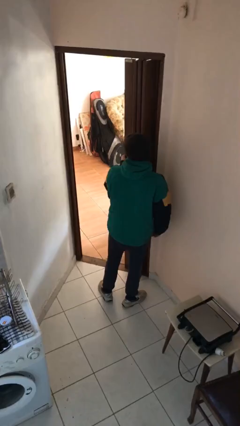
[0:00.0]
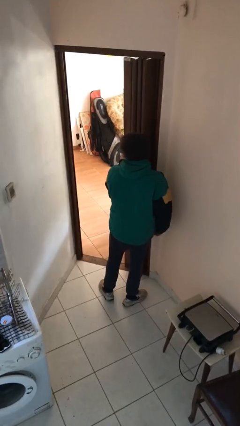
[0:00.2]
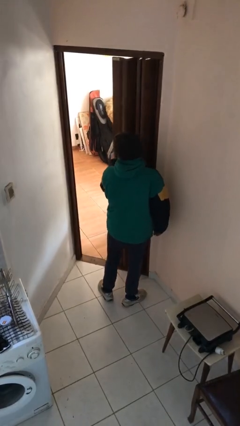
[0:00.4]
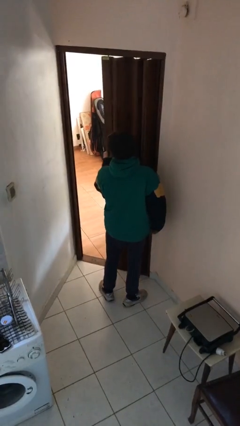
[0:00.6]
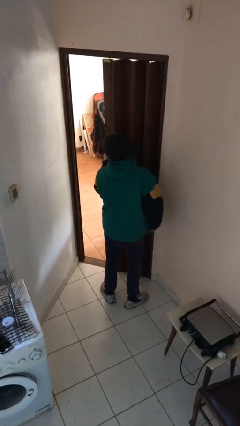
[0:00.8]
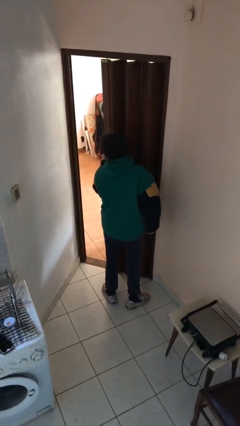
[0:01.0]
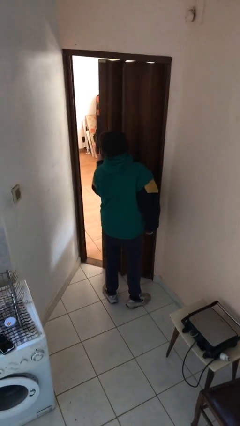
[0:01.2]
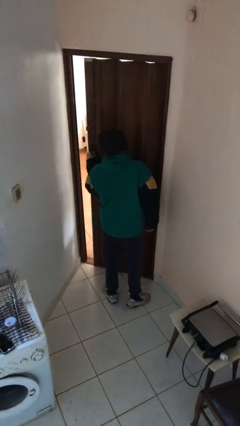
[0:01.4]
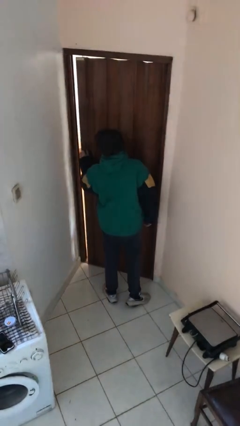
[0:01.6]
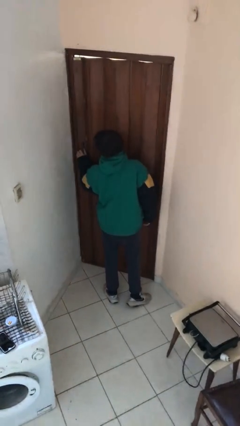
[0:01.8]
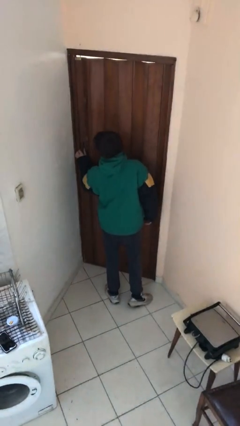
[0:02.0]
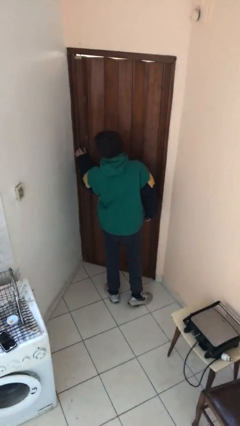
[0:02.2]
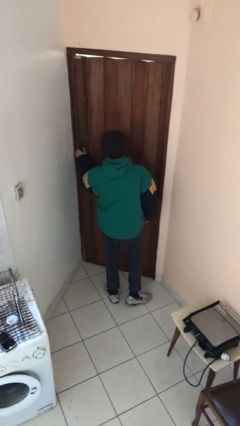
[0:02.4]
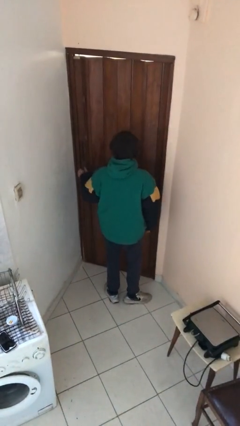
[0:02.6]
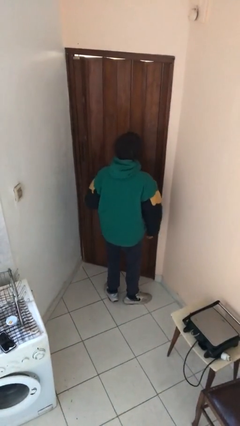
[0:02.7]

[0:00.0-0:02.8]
person closes sliding door

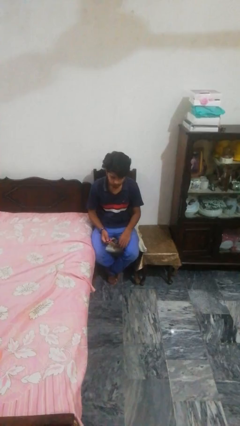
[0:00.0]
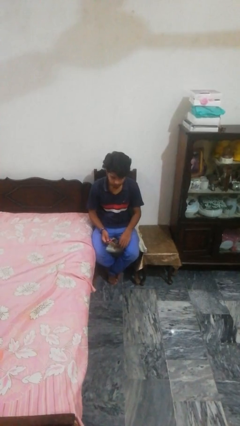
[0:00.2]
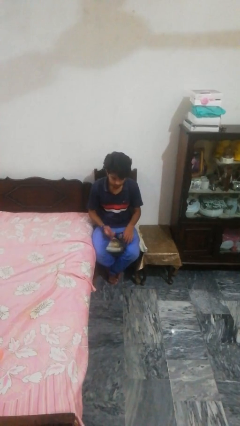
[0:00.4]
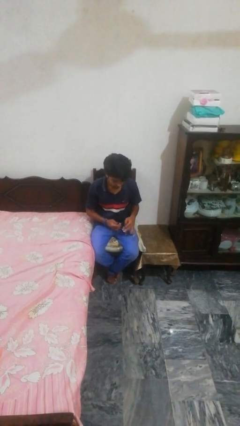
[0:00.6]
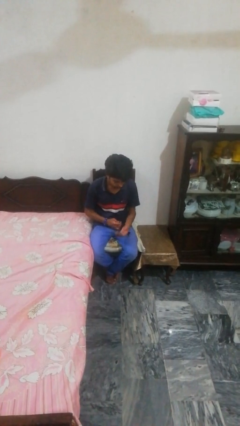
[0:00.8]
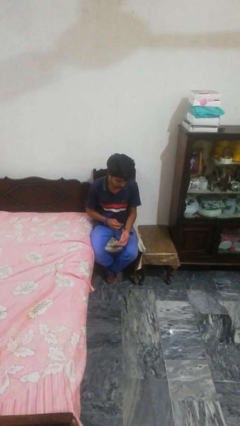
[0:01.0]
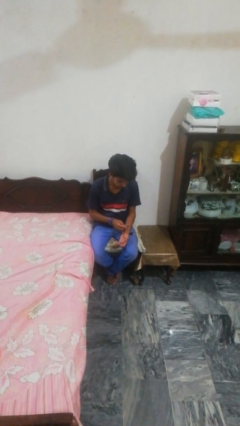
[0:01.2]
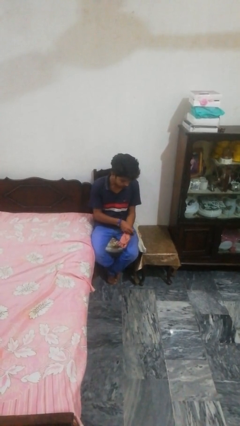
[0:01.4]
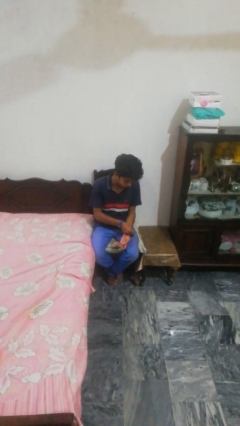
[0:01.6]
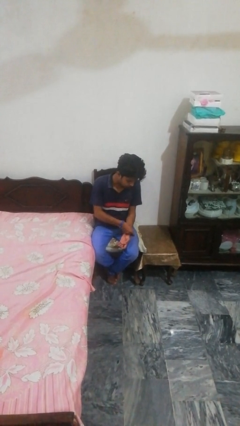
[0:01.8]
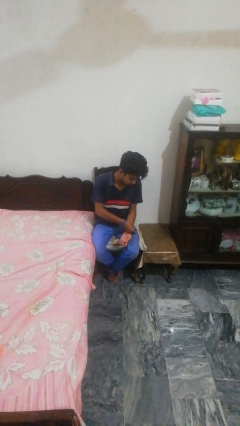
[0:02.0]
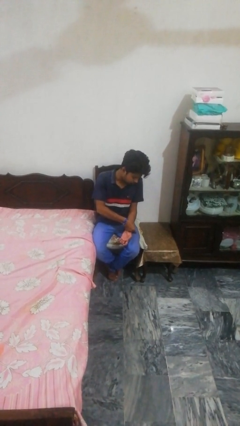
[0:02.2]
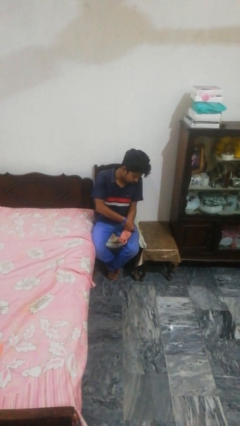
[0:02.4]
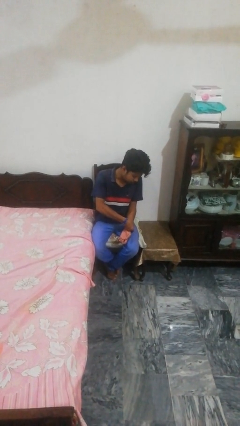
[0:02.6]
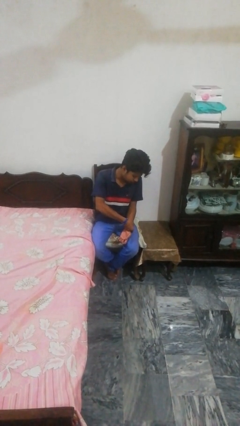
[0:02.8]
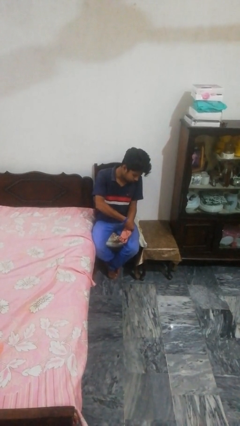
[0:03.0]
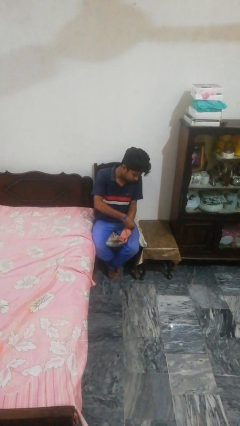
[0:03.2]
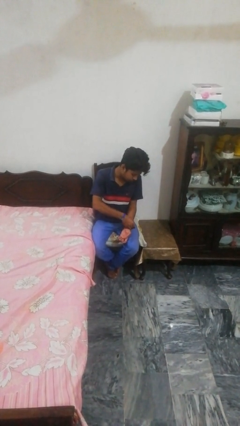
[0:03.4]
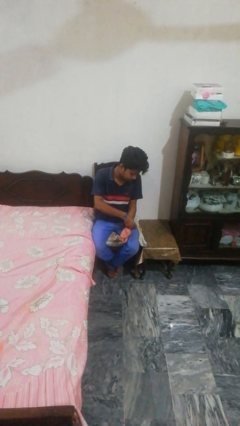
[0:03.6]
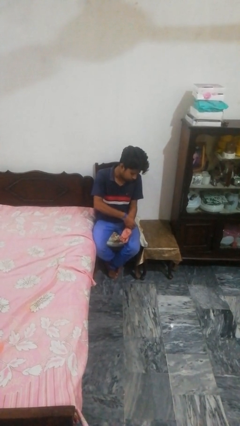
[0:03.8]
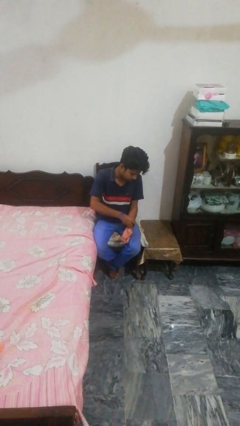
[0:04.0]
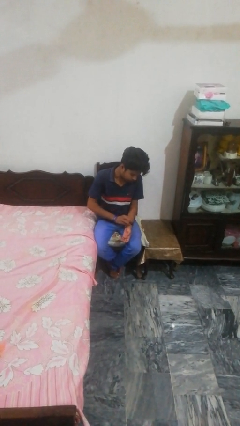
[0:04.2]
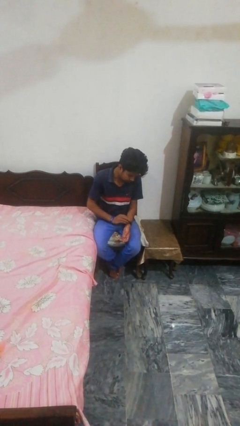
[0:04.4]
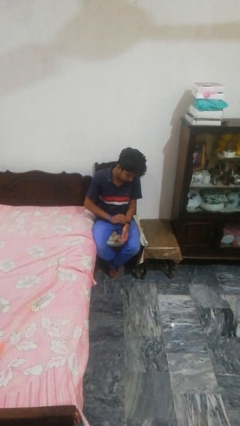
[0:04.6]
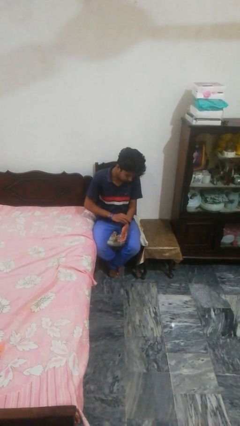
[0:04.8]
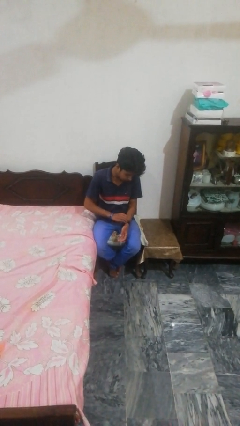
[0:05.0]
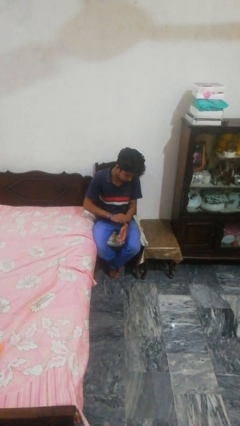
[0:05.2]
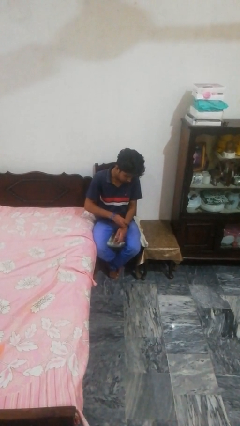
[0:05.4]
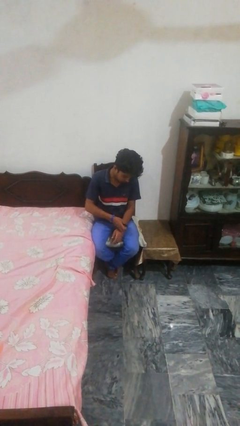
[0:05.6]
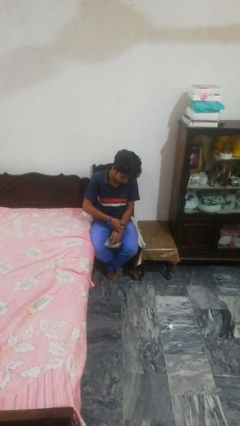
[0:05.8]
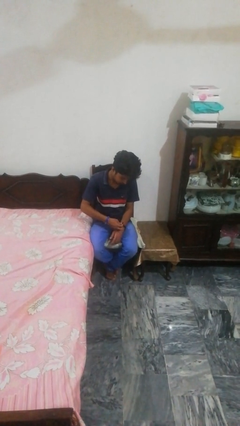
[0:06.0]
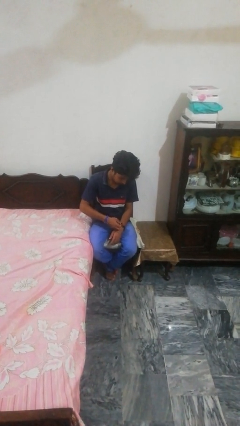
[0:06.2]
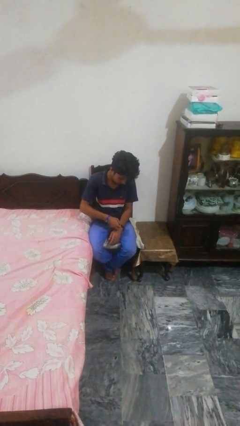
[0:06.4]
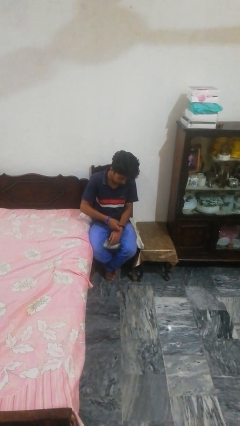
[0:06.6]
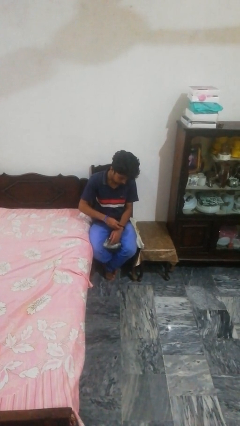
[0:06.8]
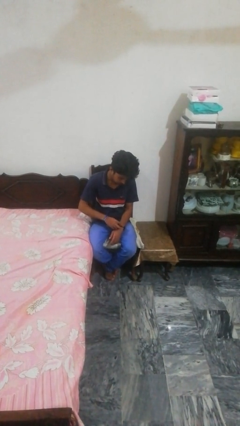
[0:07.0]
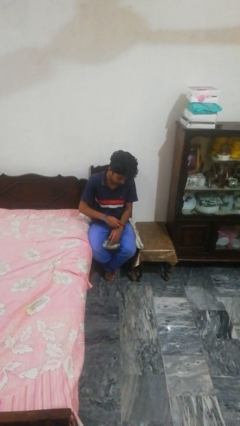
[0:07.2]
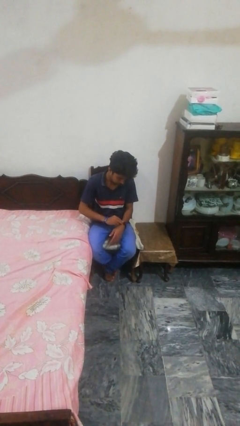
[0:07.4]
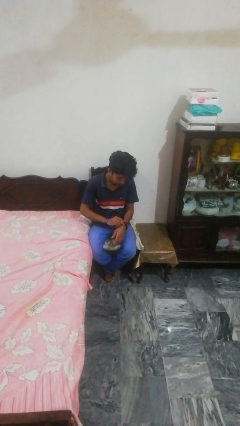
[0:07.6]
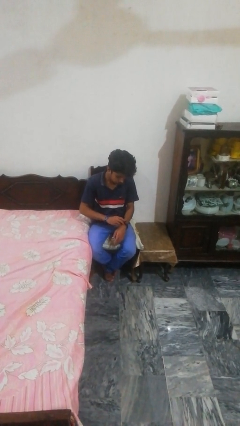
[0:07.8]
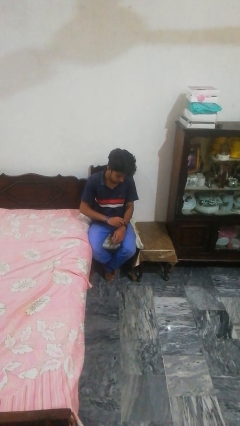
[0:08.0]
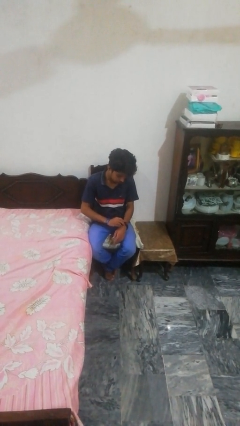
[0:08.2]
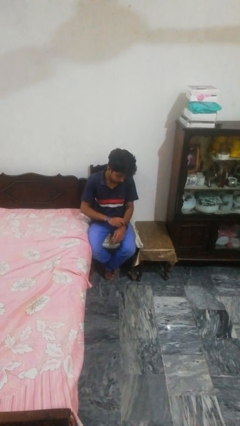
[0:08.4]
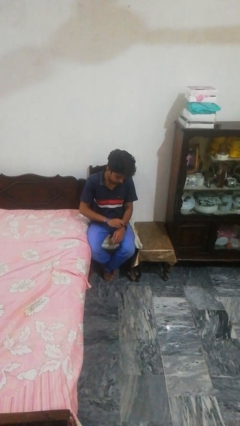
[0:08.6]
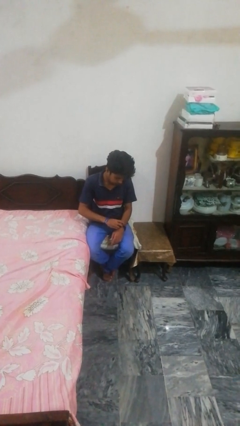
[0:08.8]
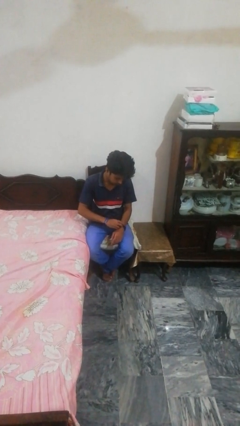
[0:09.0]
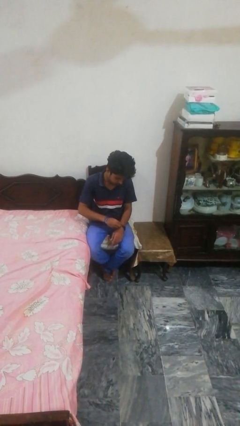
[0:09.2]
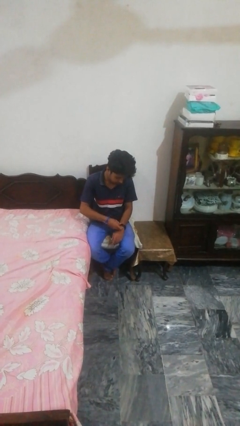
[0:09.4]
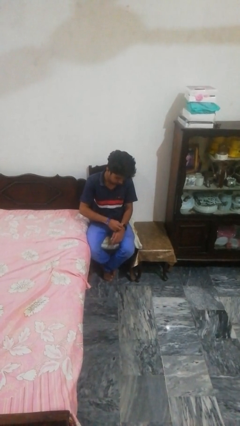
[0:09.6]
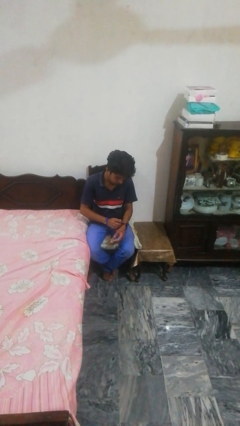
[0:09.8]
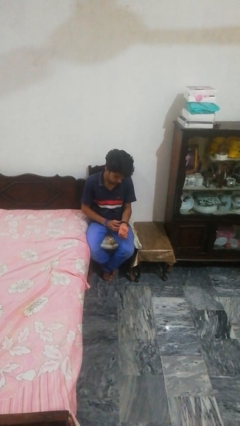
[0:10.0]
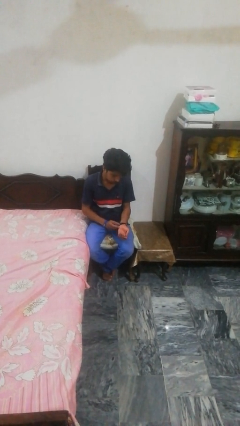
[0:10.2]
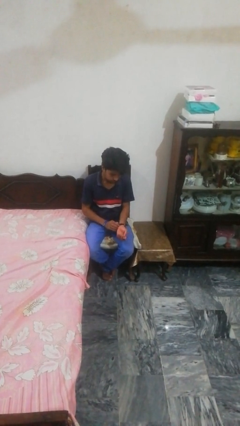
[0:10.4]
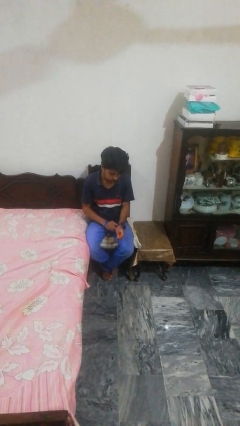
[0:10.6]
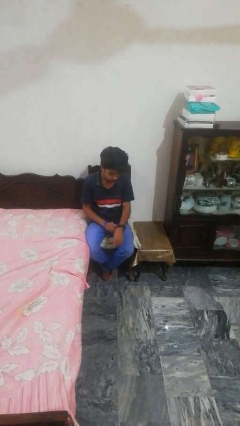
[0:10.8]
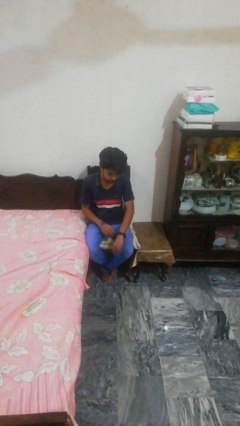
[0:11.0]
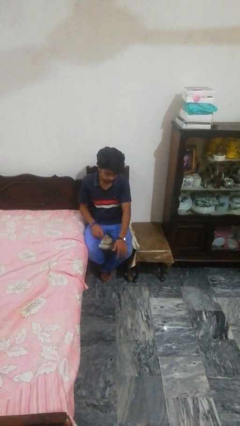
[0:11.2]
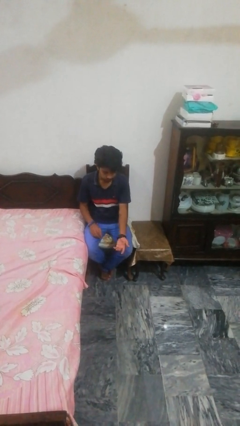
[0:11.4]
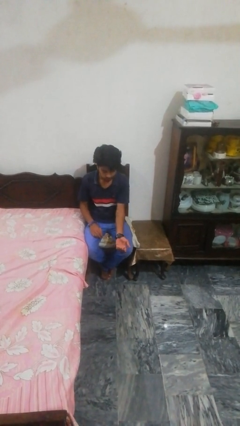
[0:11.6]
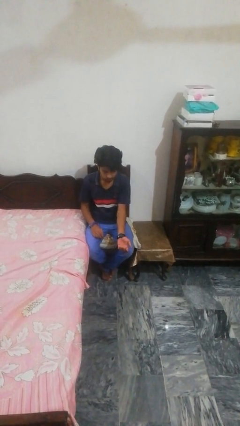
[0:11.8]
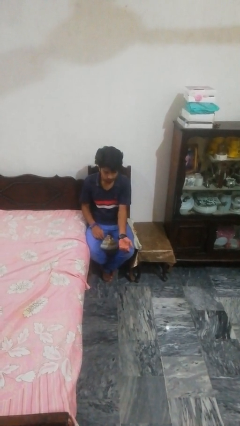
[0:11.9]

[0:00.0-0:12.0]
person puts on wristwatch

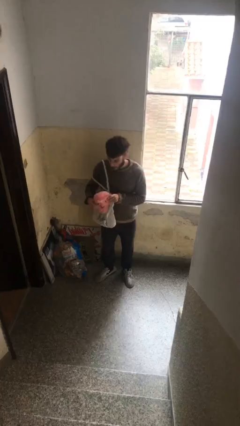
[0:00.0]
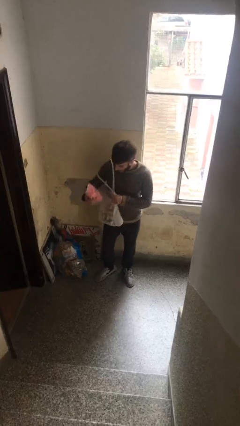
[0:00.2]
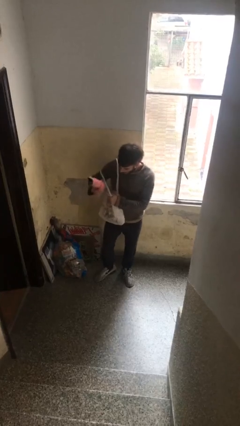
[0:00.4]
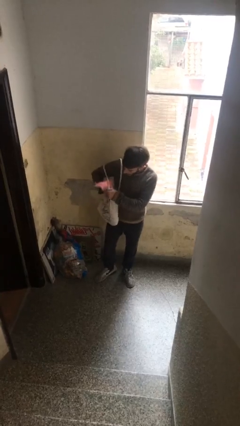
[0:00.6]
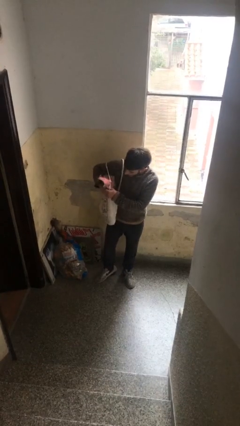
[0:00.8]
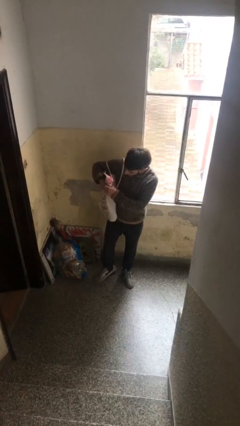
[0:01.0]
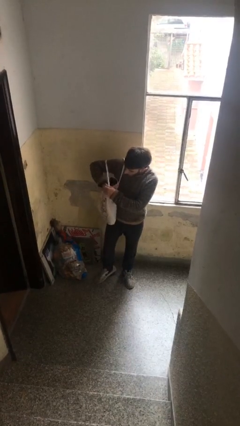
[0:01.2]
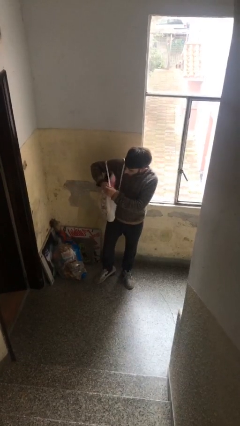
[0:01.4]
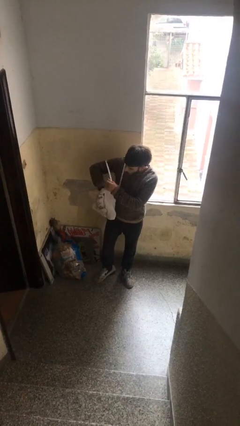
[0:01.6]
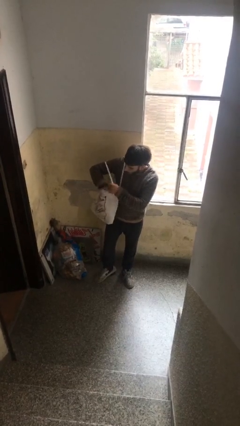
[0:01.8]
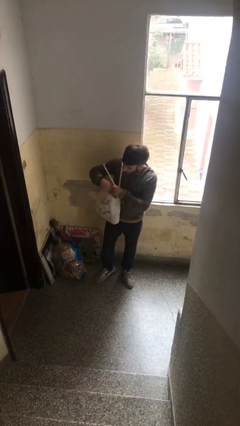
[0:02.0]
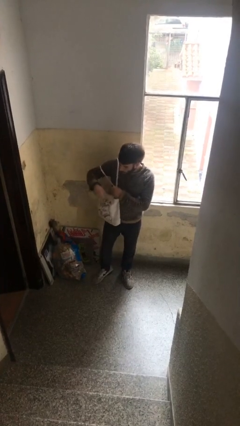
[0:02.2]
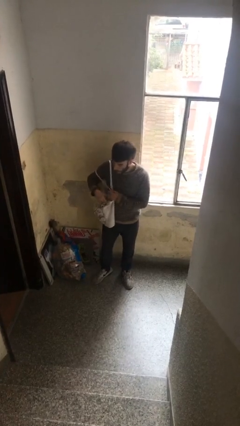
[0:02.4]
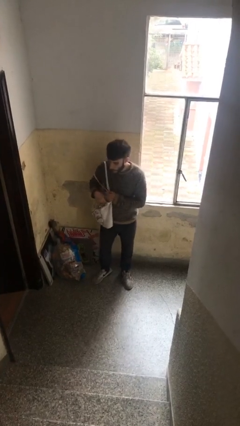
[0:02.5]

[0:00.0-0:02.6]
person puts object into purse

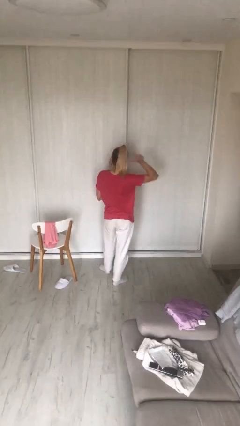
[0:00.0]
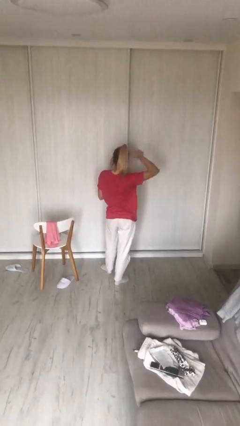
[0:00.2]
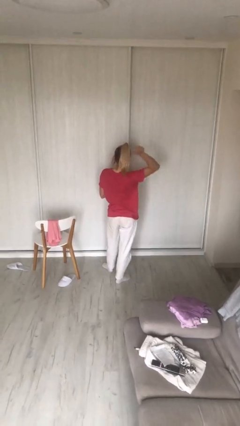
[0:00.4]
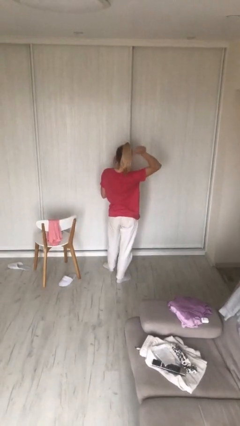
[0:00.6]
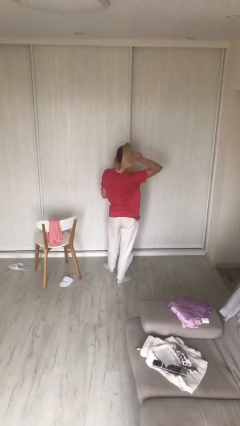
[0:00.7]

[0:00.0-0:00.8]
person gestures behind me
